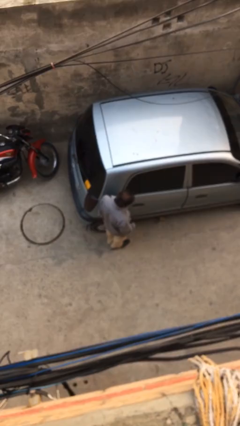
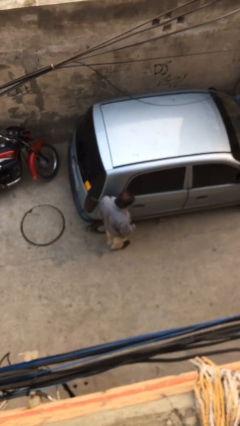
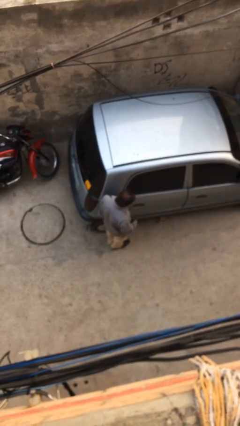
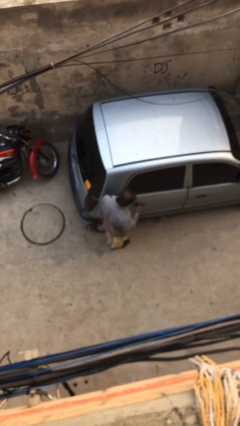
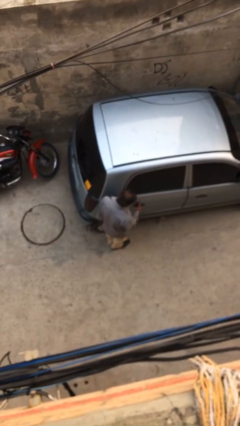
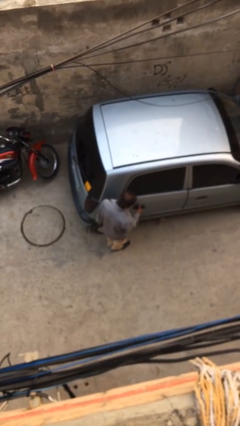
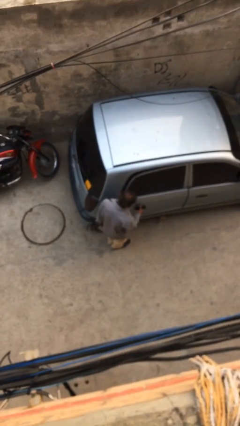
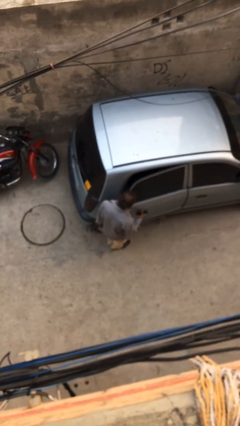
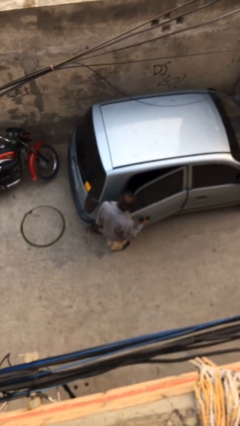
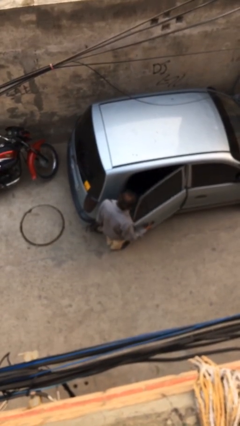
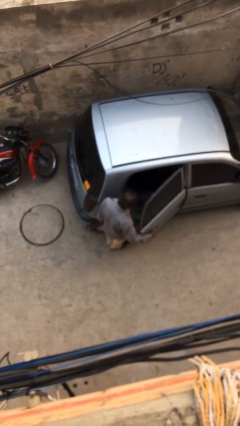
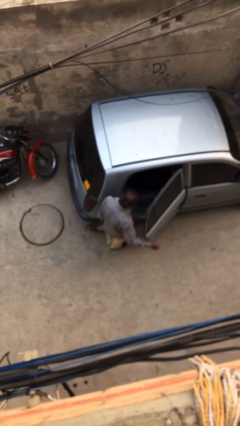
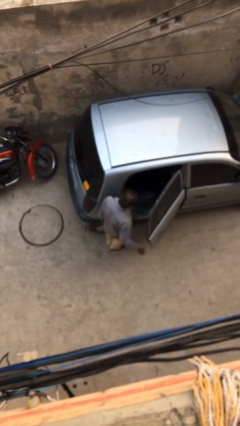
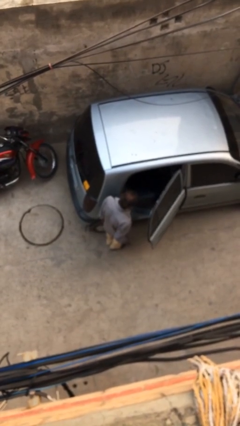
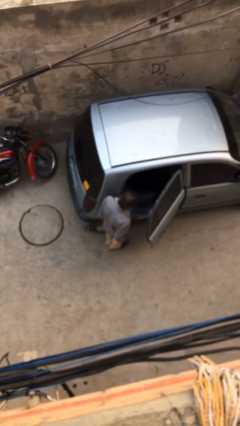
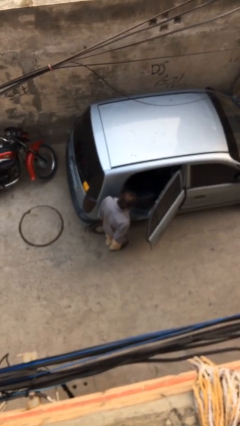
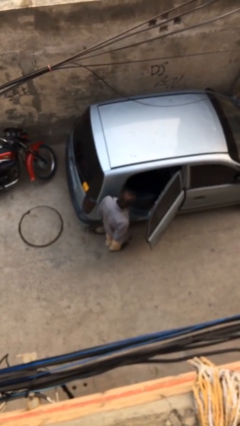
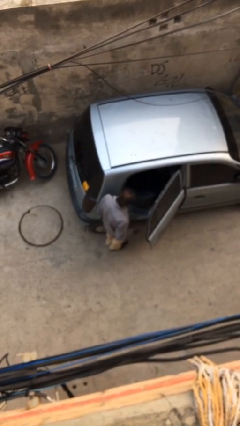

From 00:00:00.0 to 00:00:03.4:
person opens car door

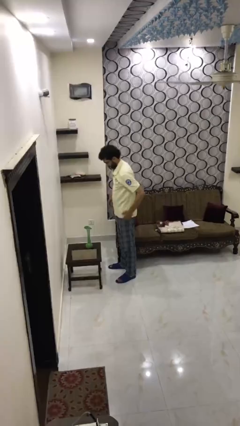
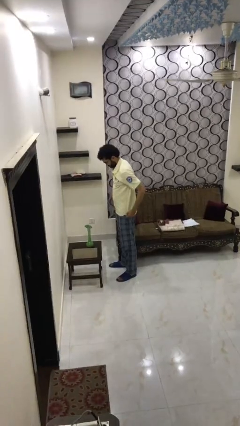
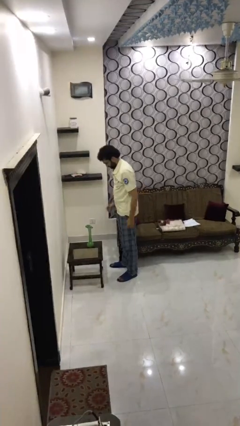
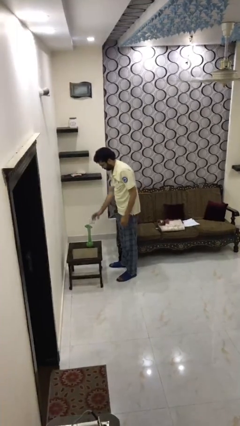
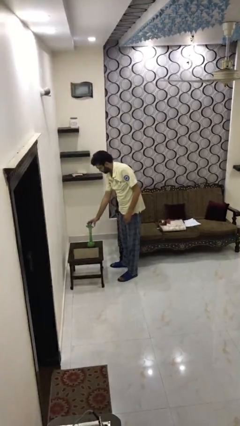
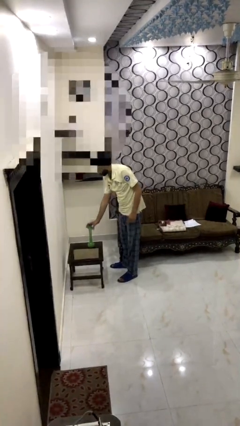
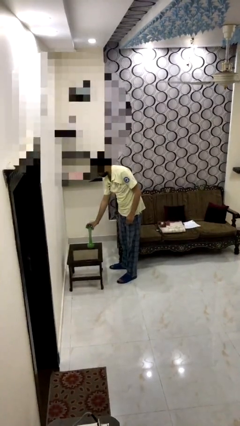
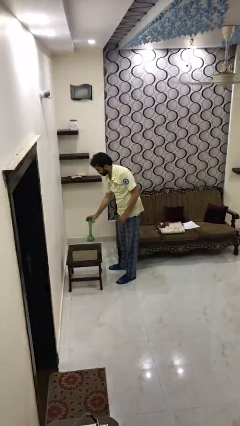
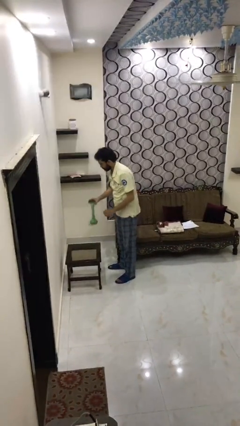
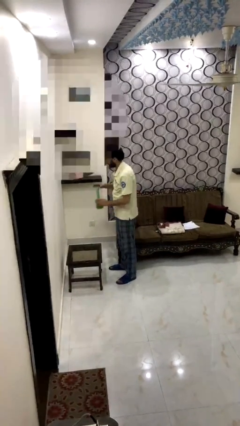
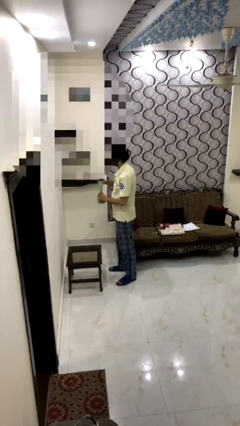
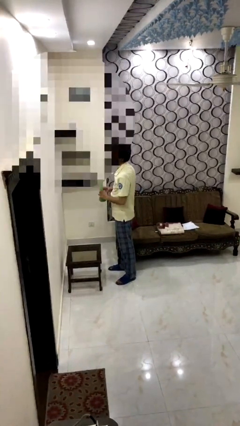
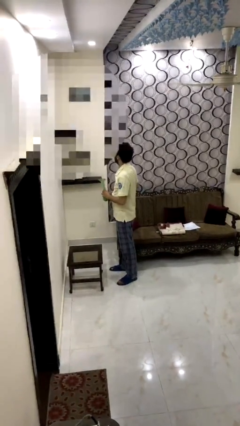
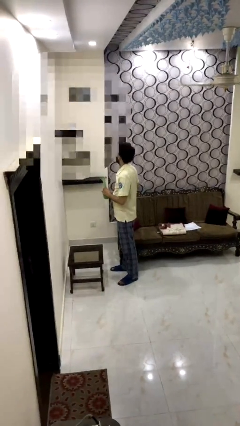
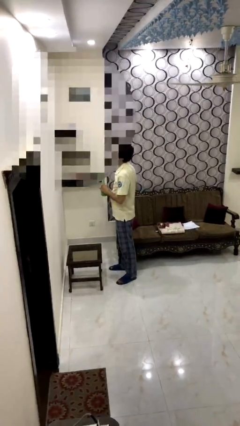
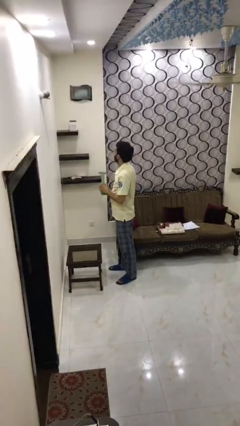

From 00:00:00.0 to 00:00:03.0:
person picks up object from table

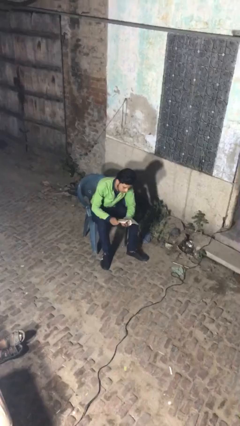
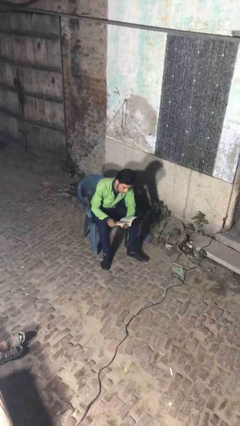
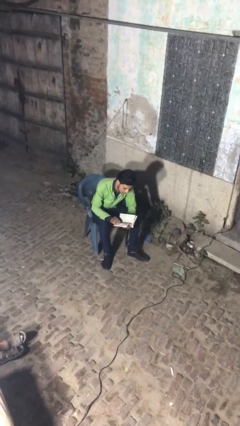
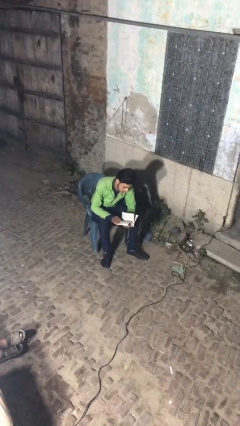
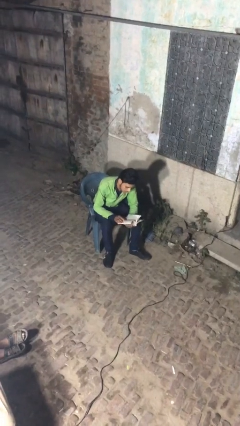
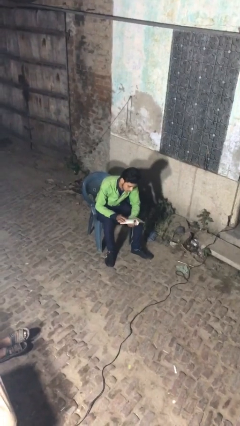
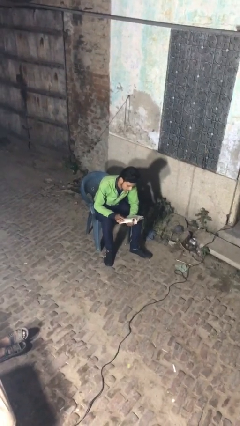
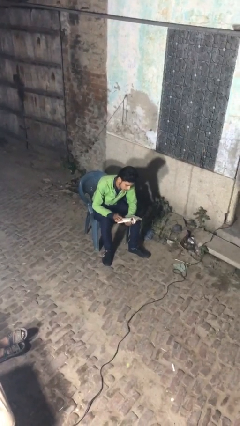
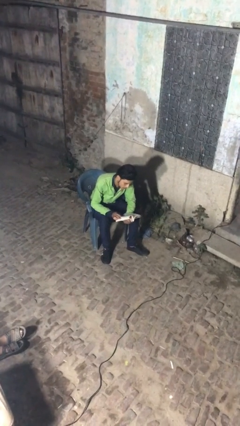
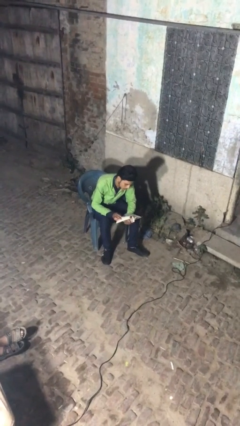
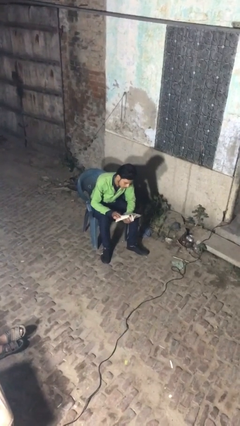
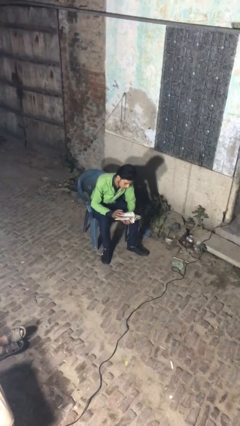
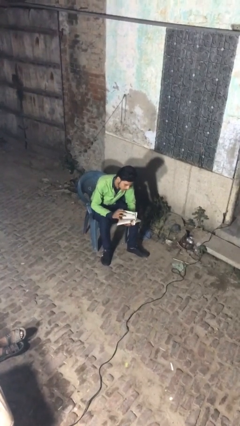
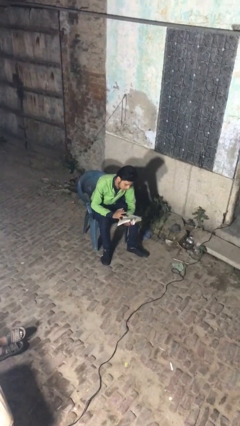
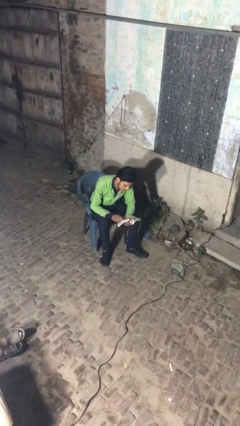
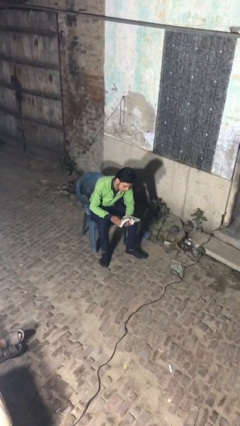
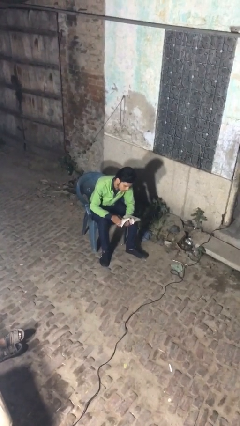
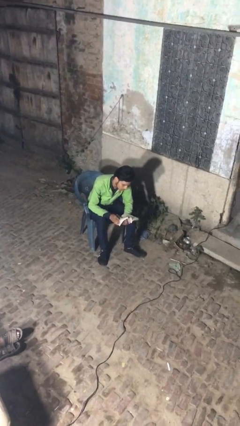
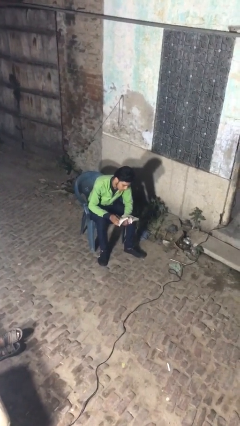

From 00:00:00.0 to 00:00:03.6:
person reads document

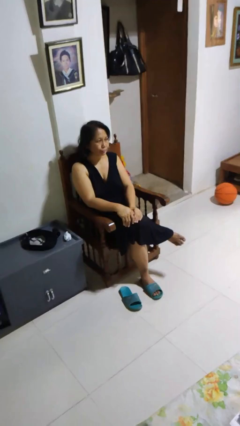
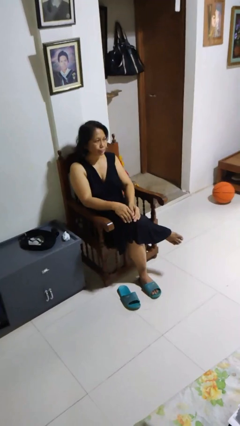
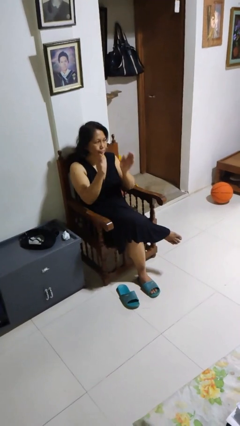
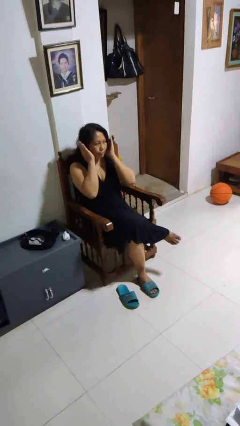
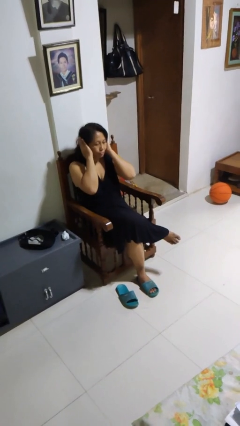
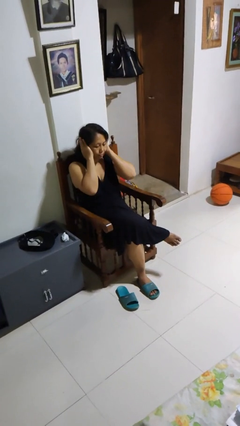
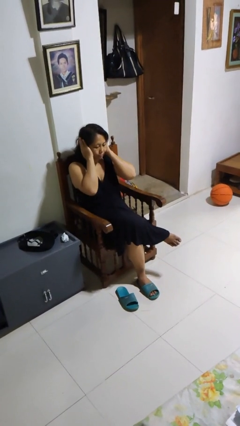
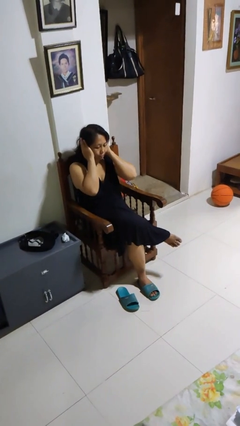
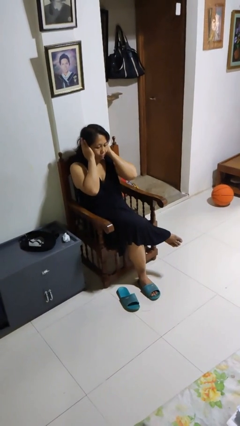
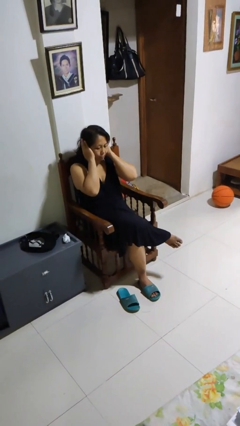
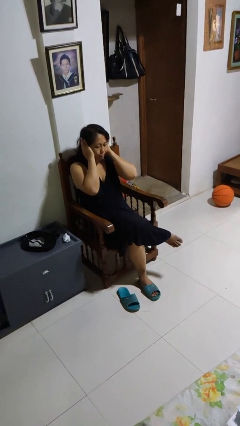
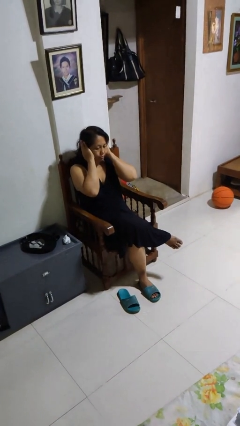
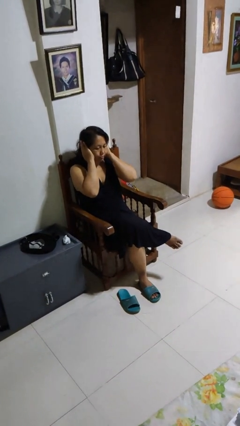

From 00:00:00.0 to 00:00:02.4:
person puts fingers in ear

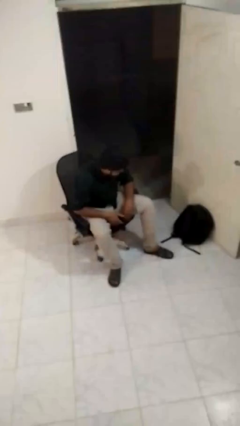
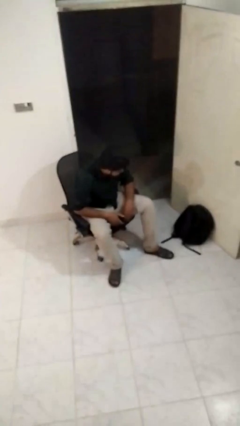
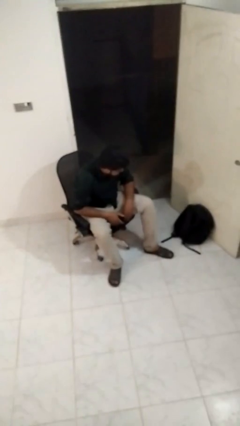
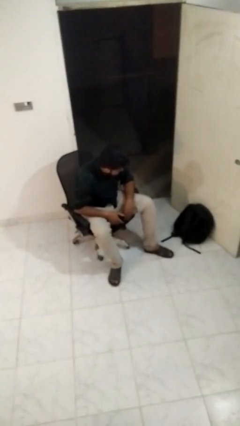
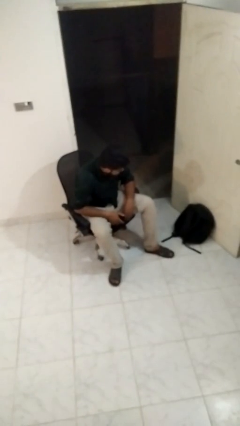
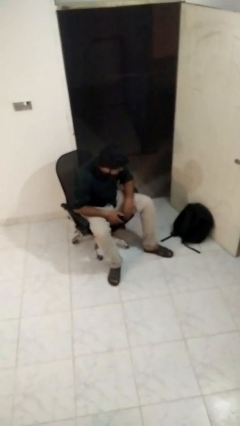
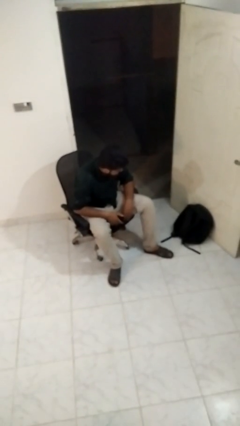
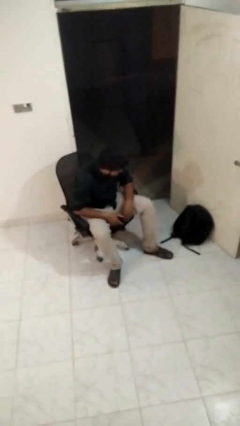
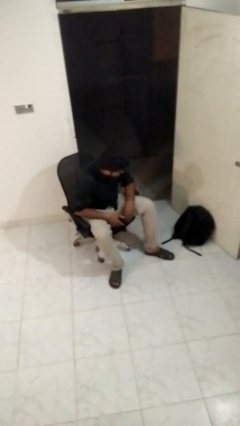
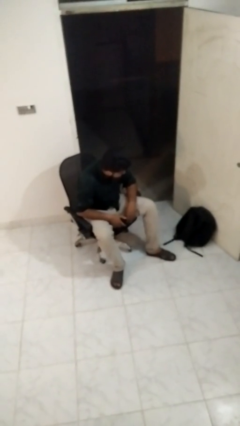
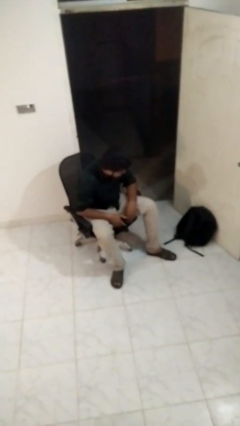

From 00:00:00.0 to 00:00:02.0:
person waves hand over object

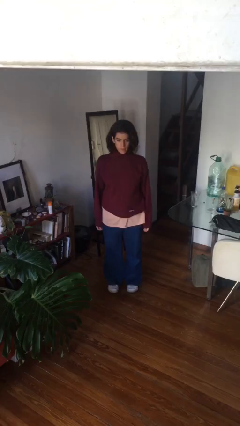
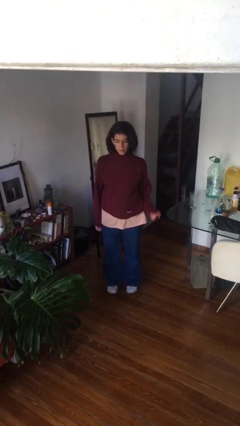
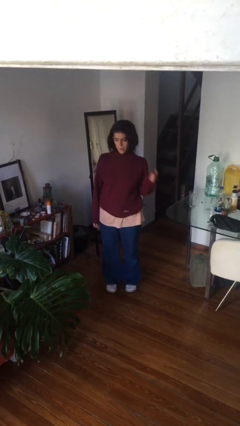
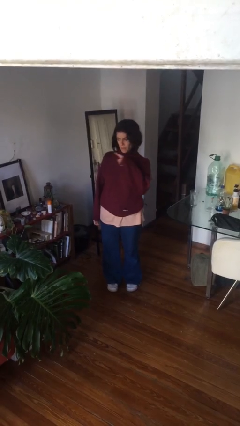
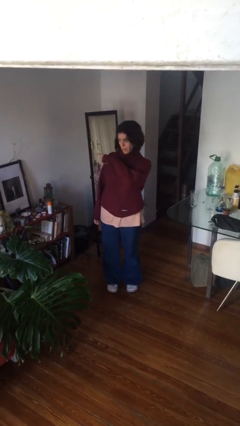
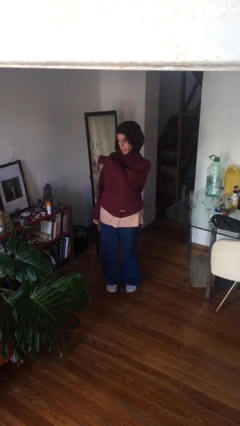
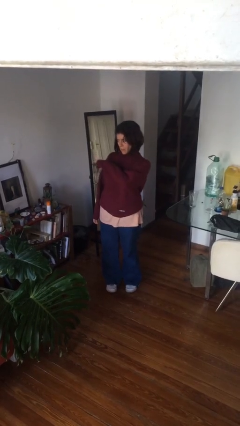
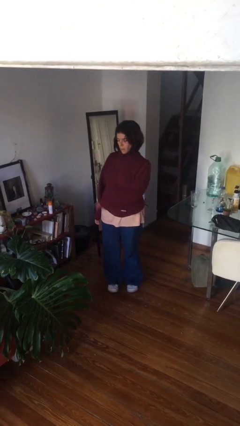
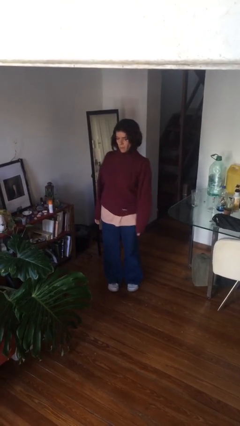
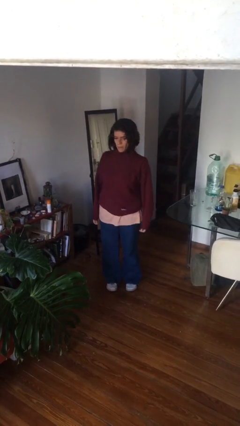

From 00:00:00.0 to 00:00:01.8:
person gestures swipe right

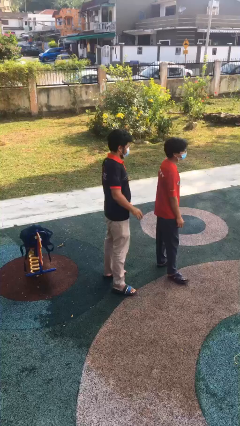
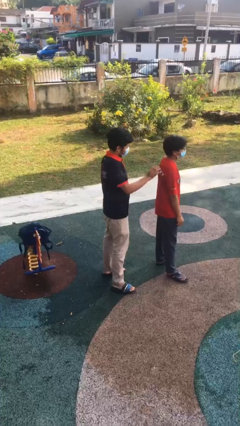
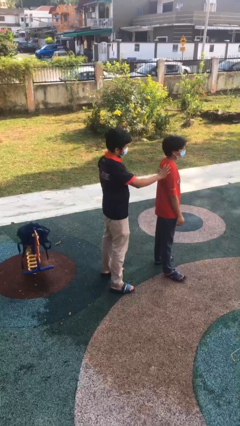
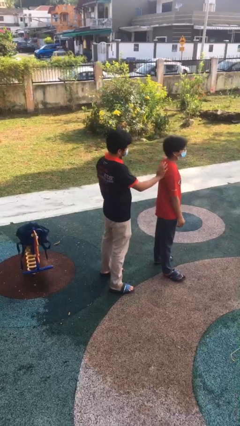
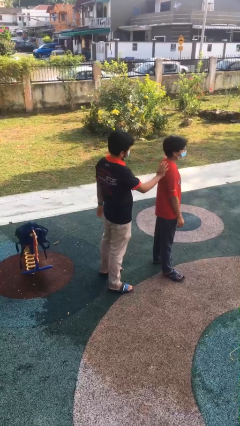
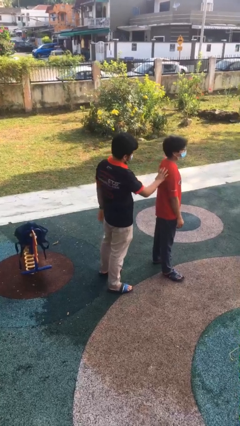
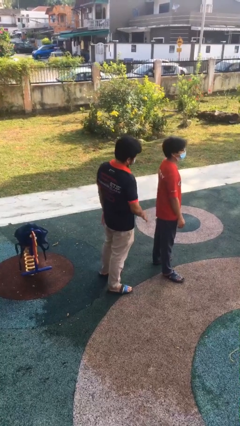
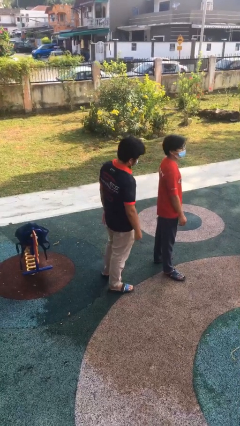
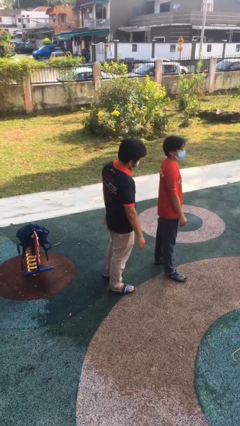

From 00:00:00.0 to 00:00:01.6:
person touches back of person
